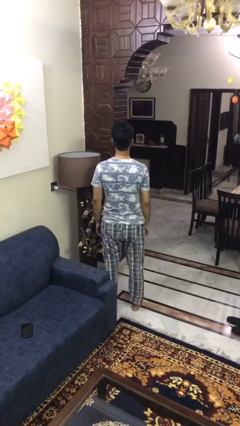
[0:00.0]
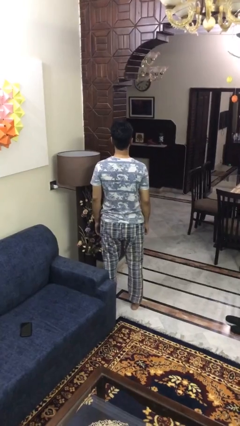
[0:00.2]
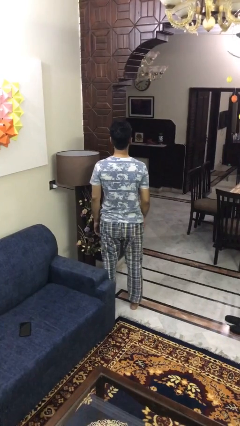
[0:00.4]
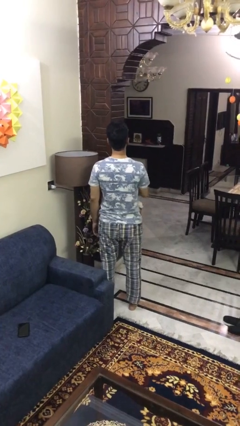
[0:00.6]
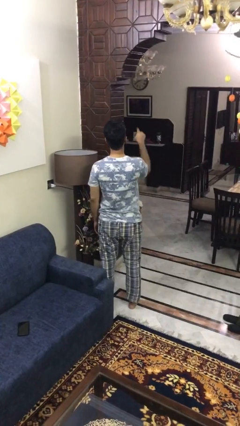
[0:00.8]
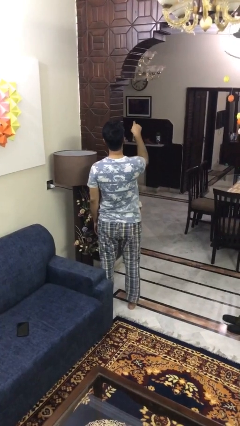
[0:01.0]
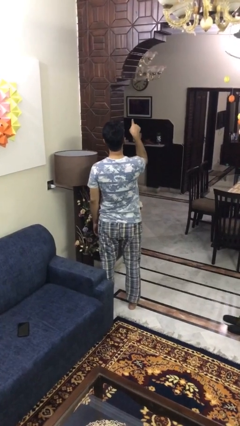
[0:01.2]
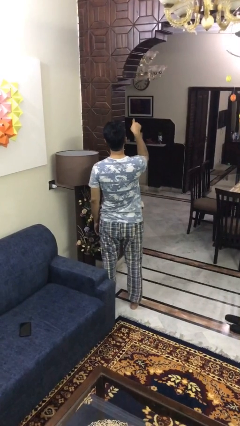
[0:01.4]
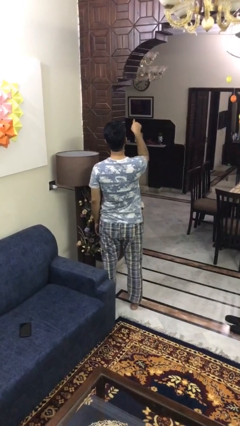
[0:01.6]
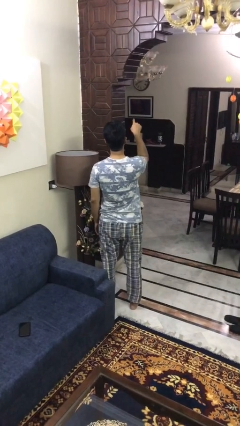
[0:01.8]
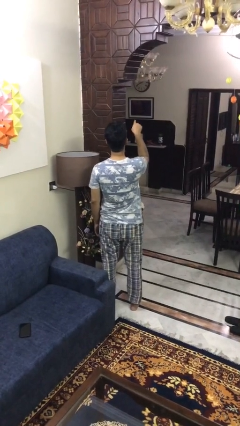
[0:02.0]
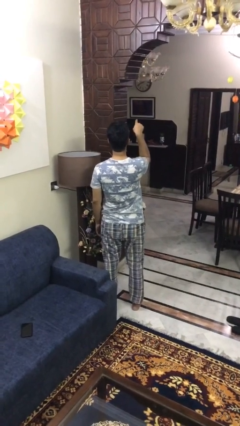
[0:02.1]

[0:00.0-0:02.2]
person points at person

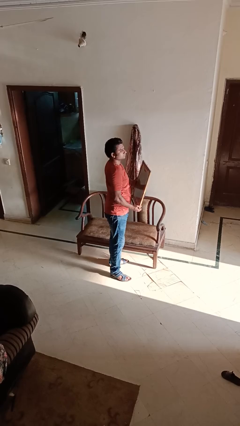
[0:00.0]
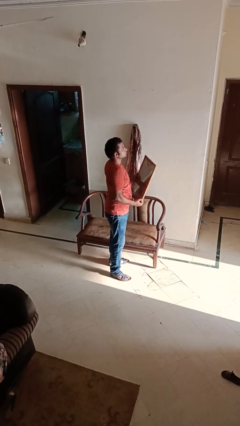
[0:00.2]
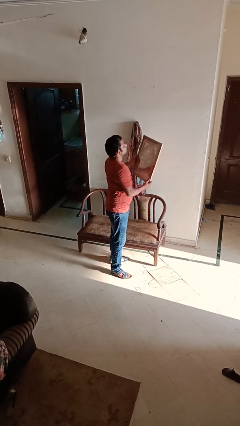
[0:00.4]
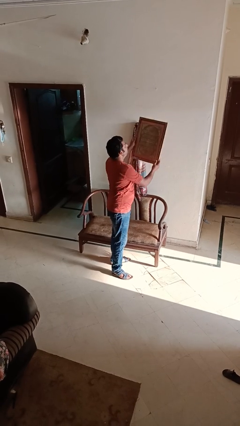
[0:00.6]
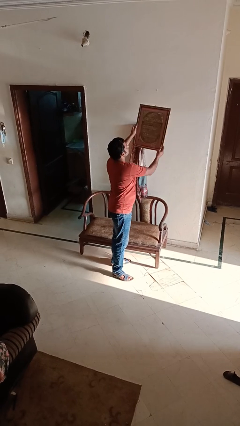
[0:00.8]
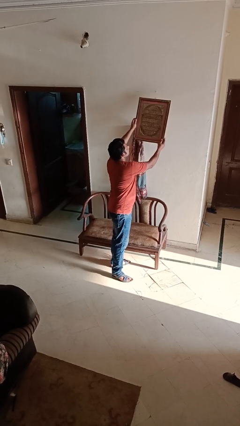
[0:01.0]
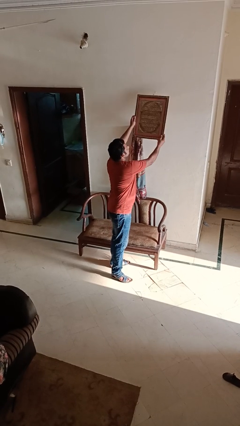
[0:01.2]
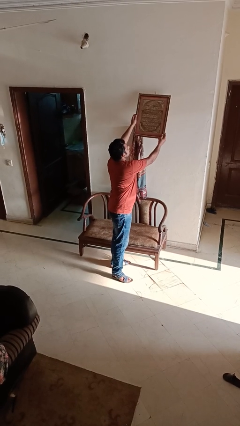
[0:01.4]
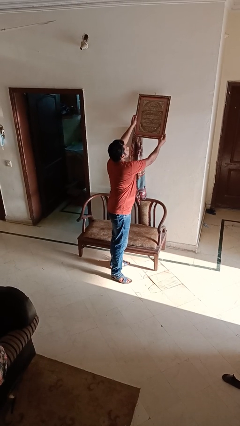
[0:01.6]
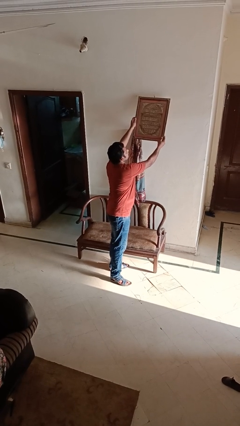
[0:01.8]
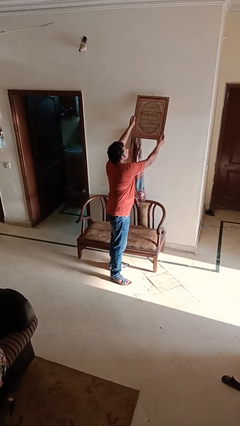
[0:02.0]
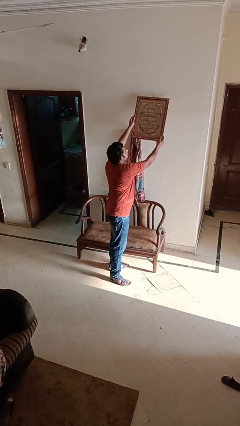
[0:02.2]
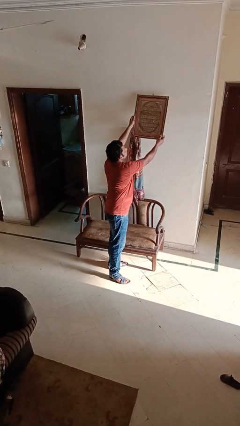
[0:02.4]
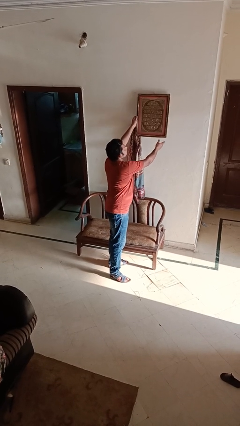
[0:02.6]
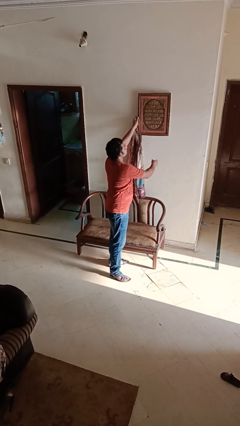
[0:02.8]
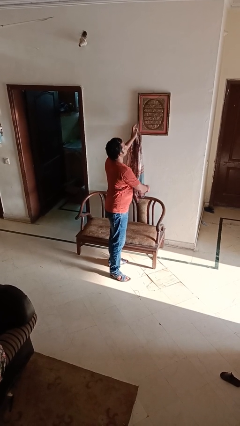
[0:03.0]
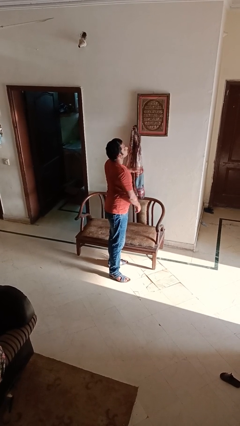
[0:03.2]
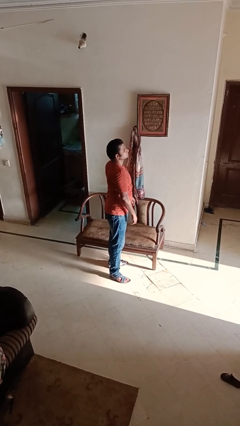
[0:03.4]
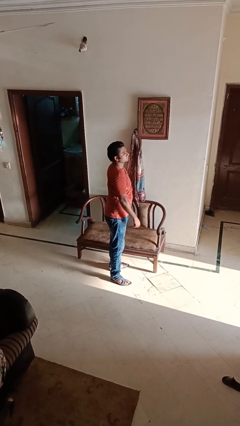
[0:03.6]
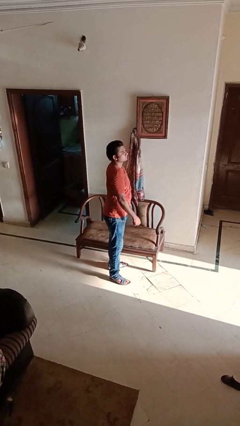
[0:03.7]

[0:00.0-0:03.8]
person puts up picture frame

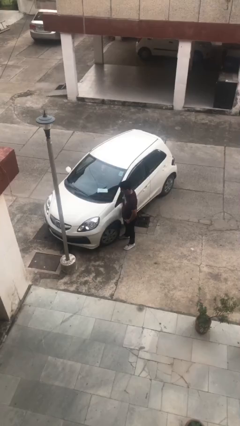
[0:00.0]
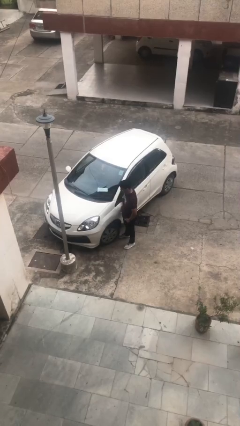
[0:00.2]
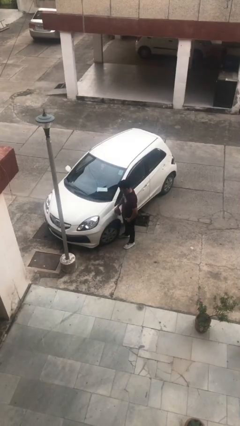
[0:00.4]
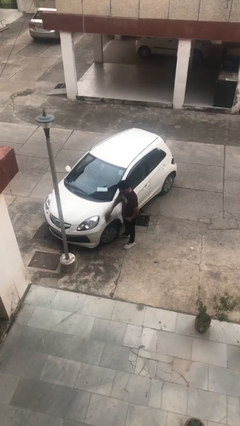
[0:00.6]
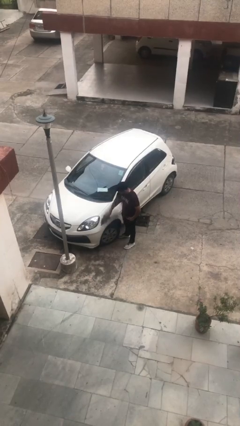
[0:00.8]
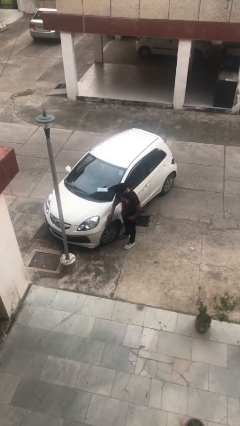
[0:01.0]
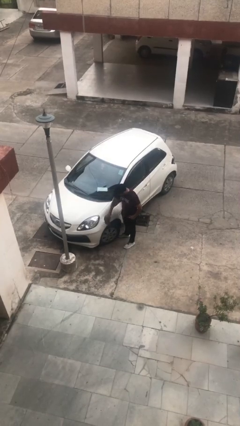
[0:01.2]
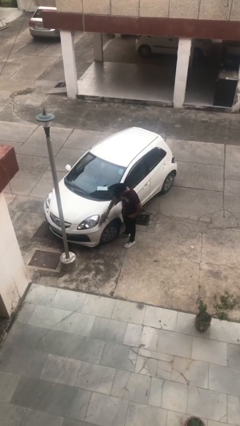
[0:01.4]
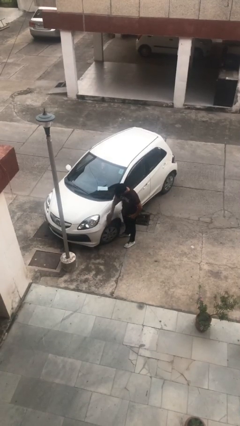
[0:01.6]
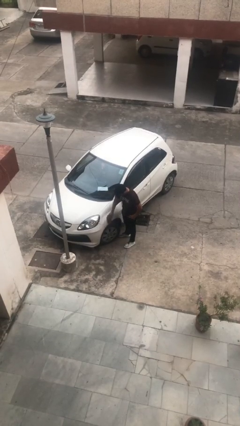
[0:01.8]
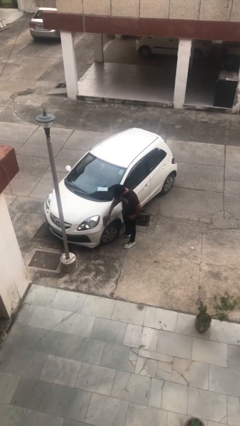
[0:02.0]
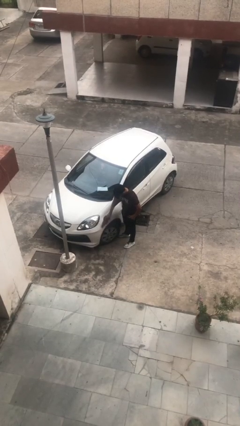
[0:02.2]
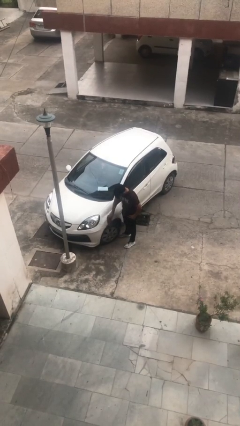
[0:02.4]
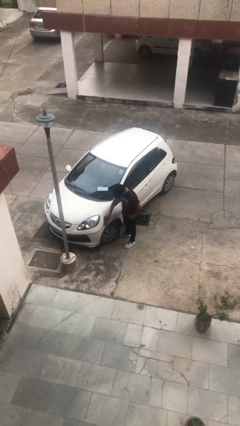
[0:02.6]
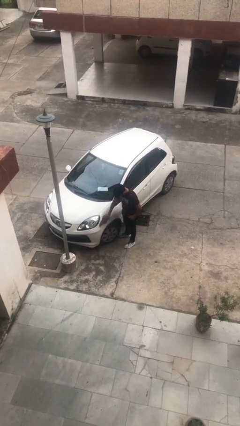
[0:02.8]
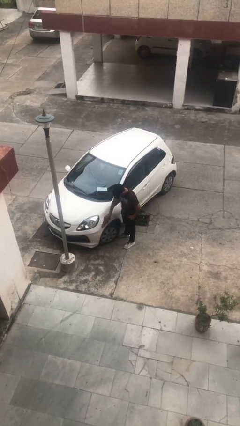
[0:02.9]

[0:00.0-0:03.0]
person polishes car with rag

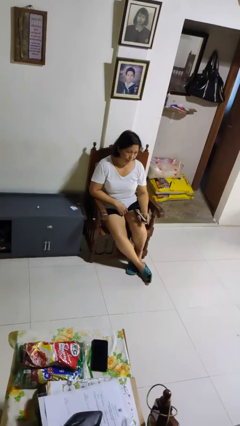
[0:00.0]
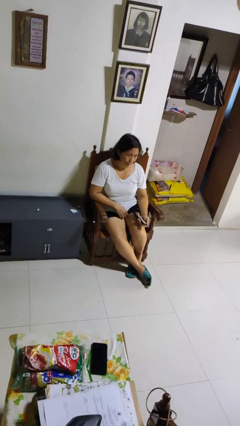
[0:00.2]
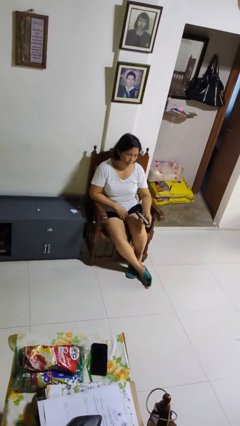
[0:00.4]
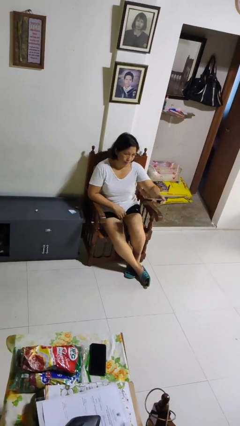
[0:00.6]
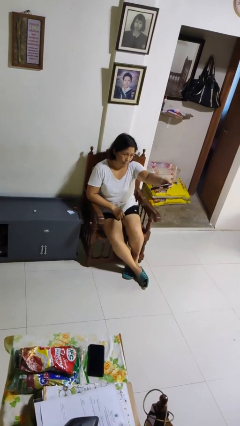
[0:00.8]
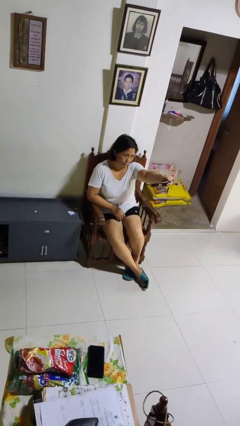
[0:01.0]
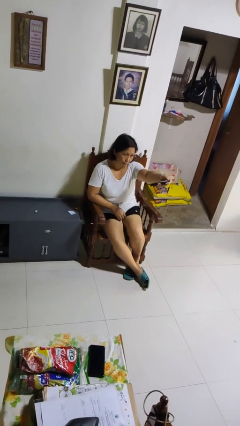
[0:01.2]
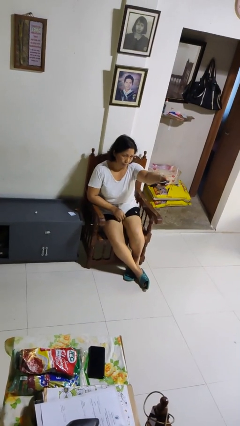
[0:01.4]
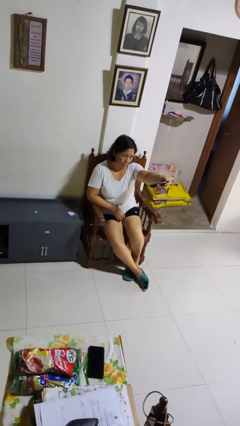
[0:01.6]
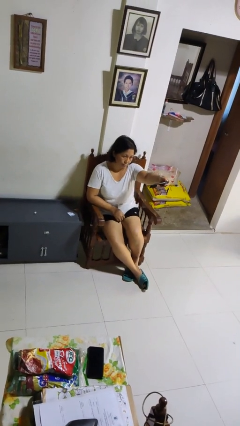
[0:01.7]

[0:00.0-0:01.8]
person uses television remote

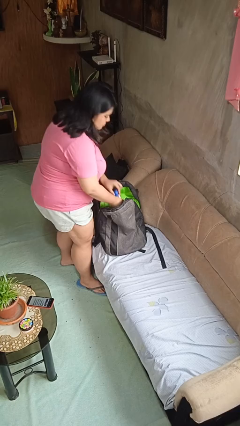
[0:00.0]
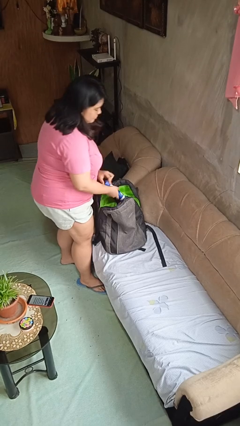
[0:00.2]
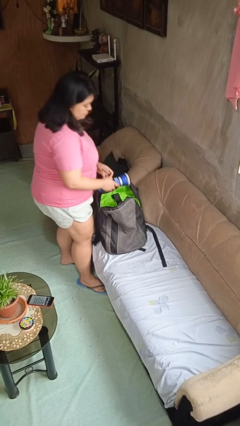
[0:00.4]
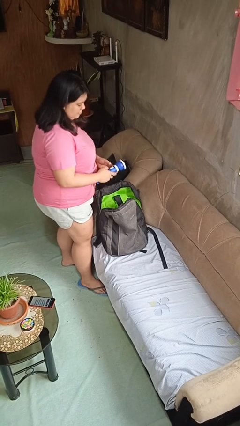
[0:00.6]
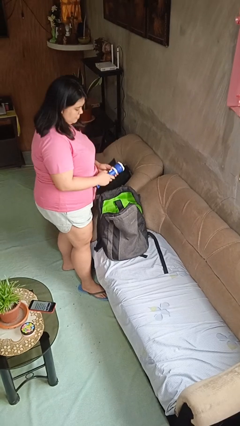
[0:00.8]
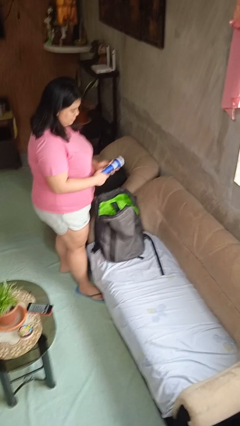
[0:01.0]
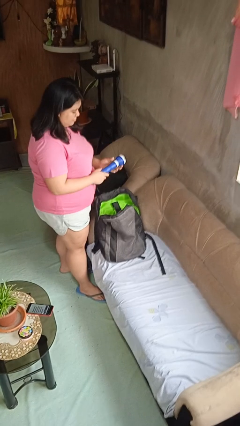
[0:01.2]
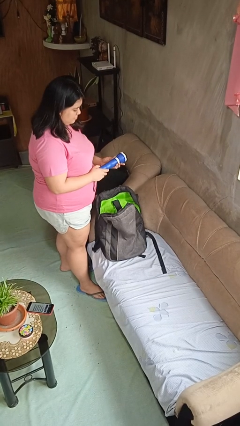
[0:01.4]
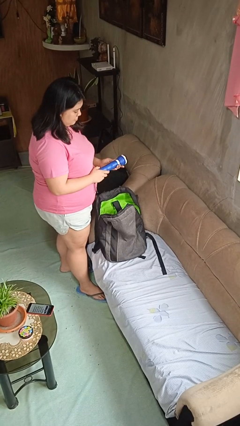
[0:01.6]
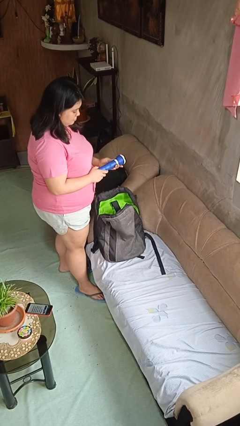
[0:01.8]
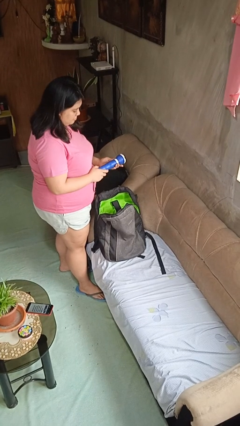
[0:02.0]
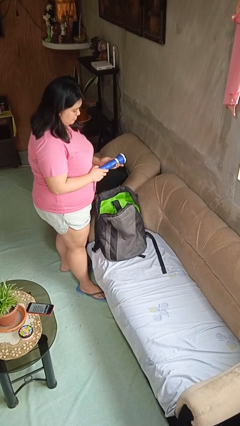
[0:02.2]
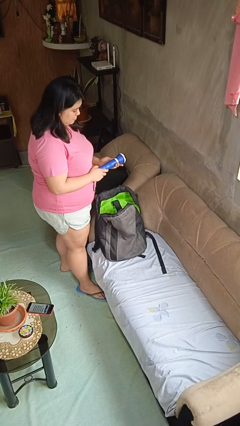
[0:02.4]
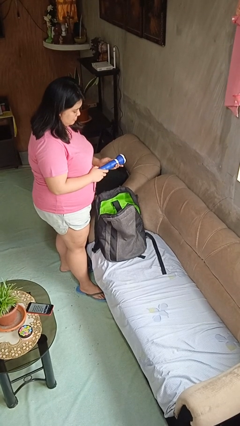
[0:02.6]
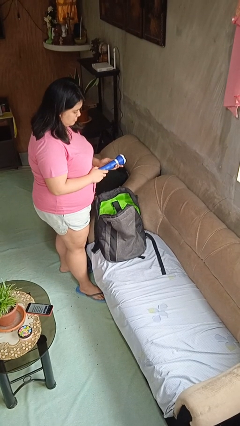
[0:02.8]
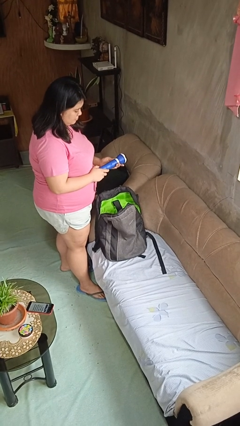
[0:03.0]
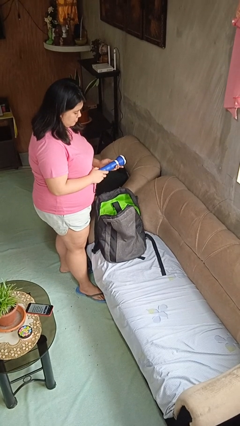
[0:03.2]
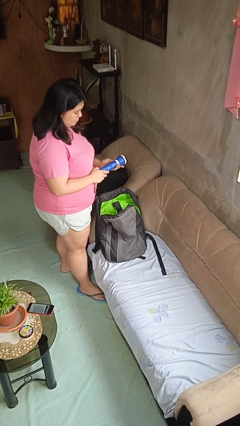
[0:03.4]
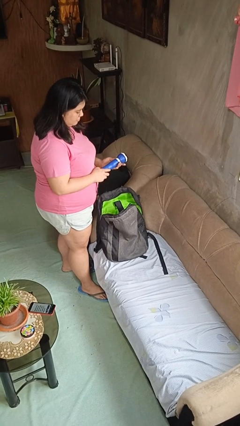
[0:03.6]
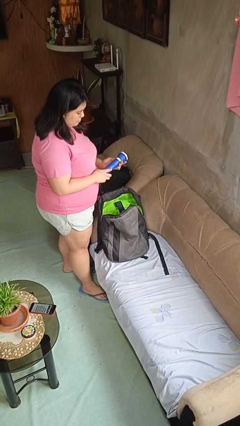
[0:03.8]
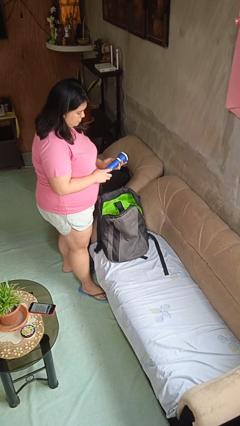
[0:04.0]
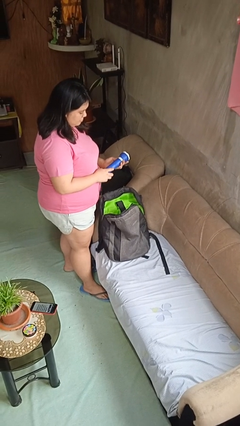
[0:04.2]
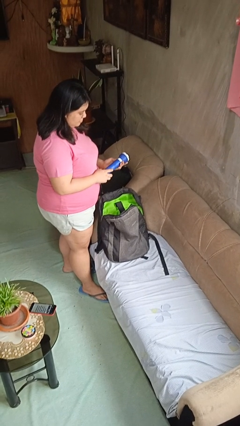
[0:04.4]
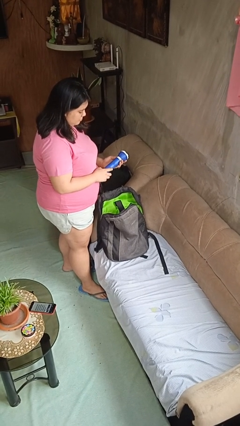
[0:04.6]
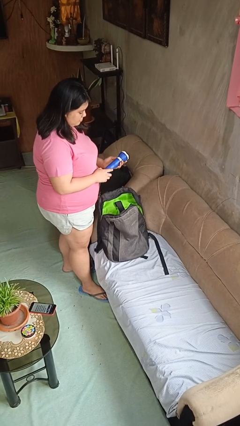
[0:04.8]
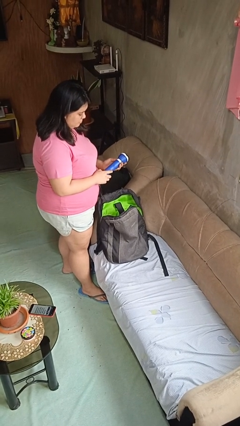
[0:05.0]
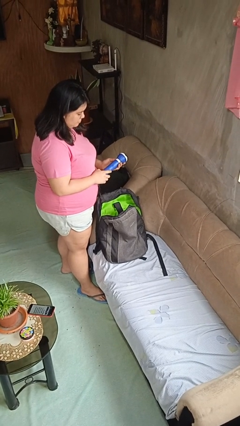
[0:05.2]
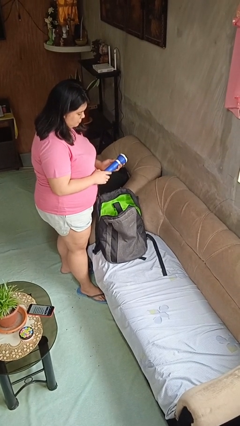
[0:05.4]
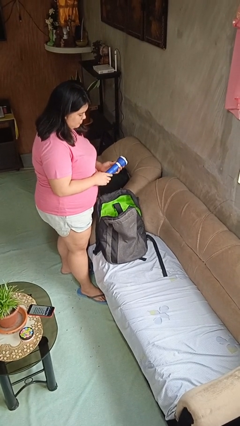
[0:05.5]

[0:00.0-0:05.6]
person takes object from backpack

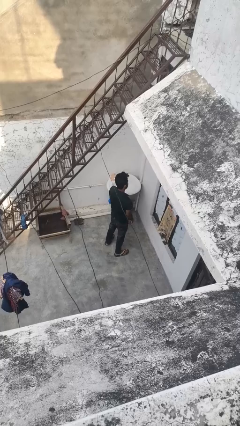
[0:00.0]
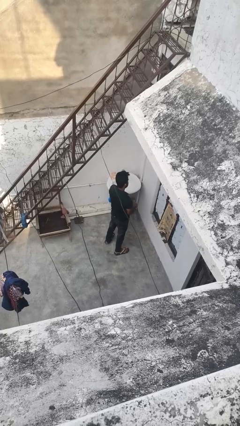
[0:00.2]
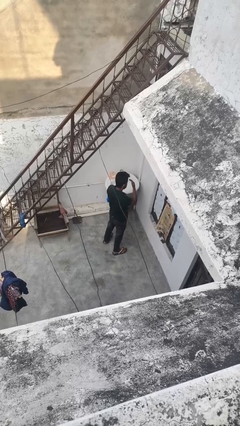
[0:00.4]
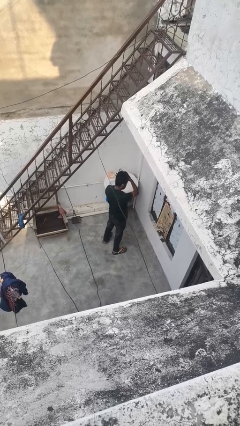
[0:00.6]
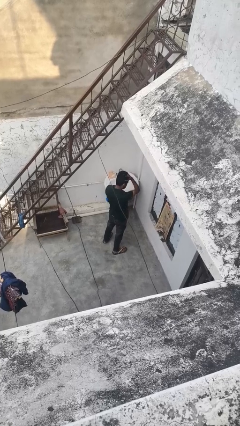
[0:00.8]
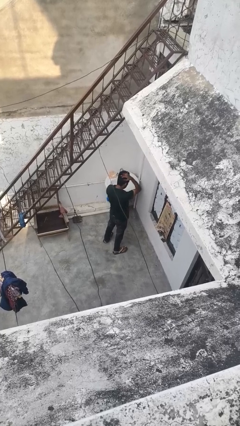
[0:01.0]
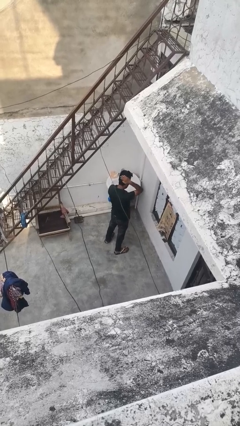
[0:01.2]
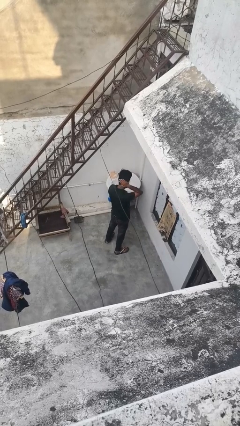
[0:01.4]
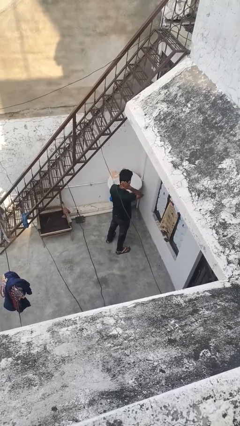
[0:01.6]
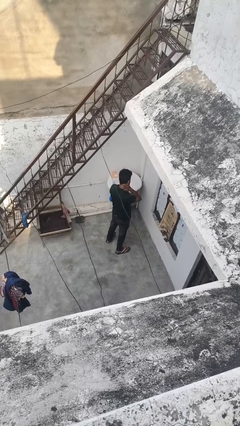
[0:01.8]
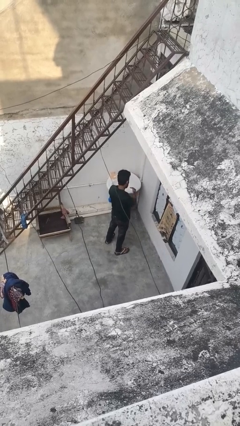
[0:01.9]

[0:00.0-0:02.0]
person strokes hair
